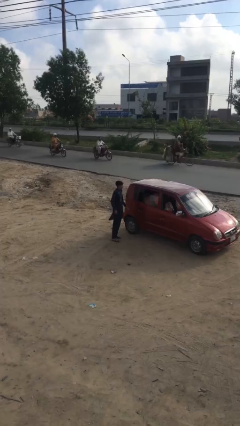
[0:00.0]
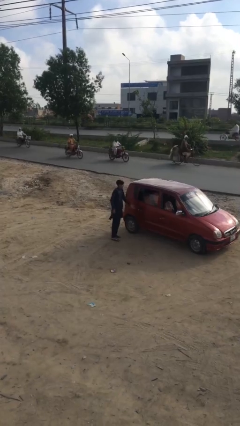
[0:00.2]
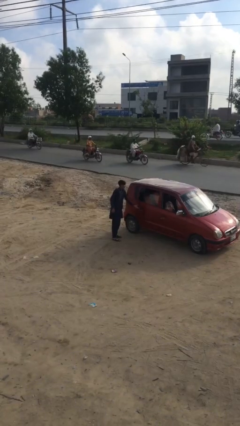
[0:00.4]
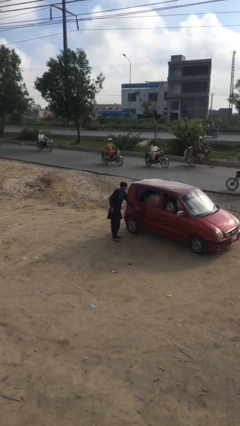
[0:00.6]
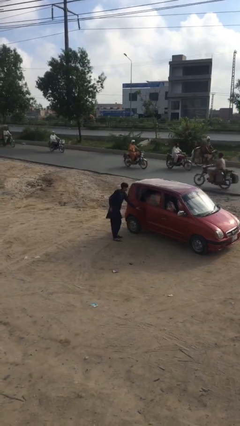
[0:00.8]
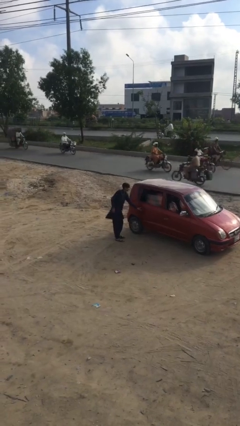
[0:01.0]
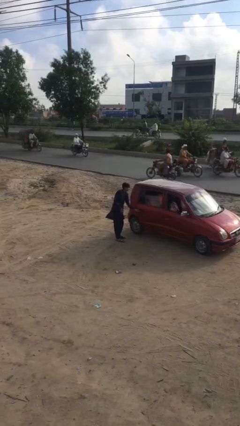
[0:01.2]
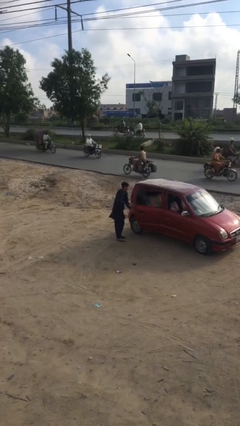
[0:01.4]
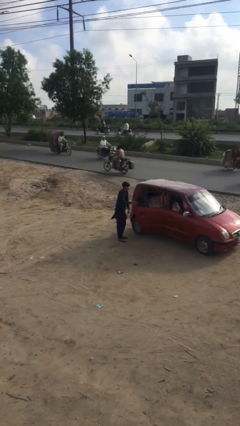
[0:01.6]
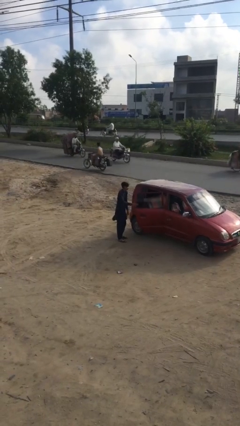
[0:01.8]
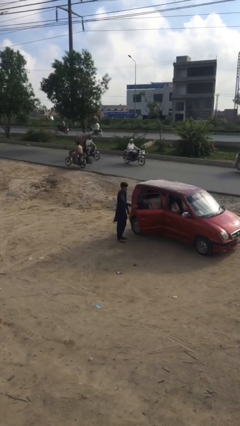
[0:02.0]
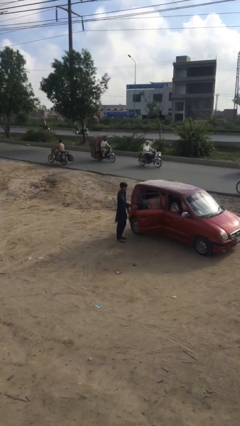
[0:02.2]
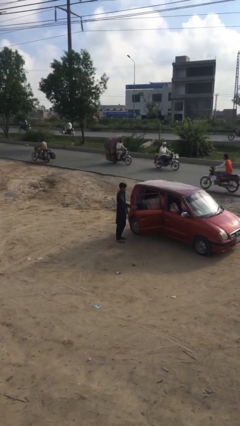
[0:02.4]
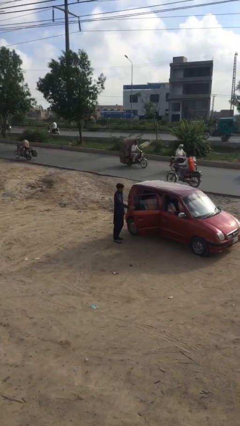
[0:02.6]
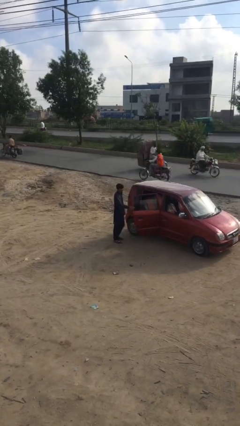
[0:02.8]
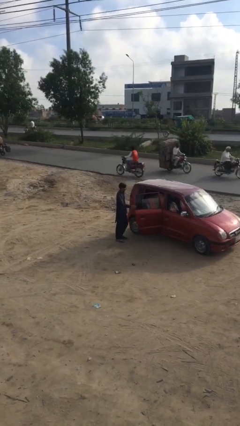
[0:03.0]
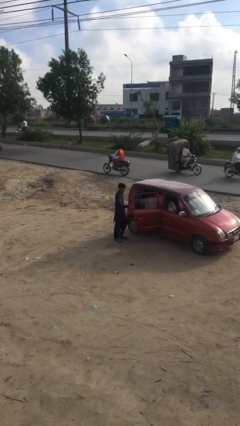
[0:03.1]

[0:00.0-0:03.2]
person opens car door

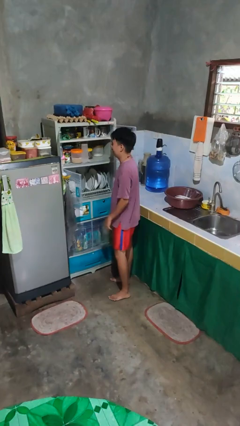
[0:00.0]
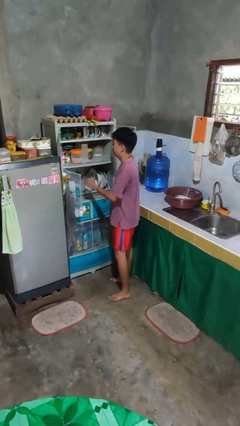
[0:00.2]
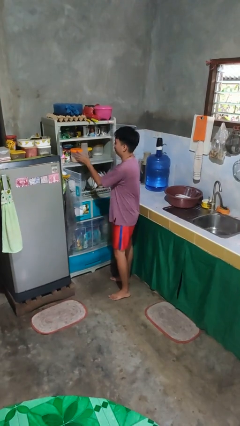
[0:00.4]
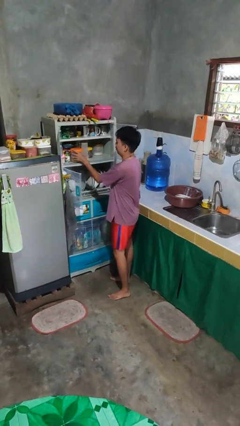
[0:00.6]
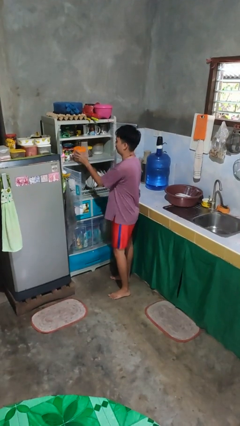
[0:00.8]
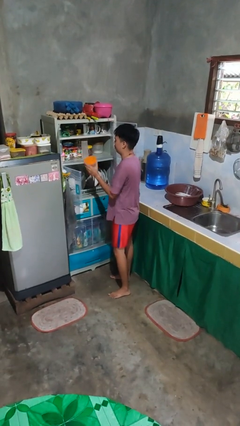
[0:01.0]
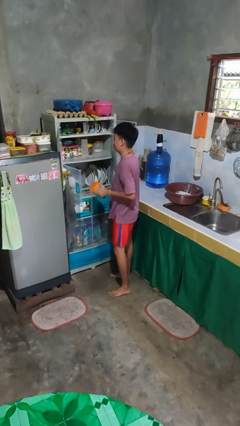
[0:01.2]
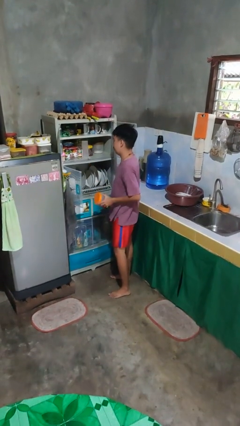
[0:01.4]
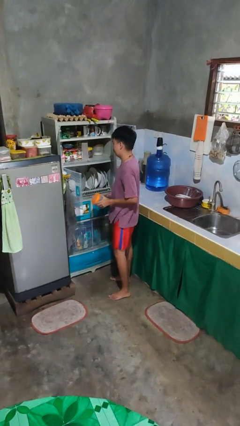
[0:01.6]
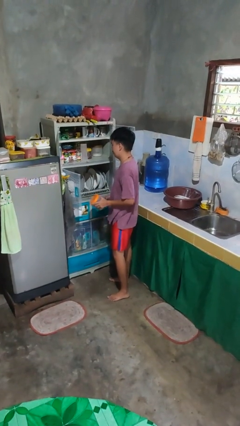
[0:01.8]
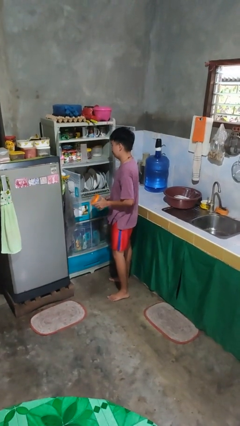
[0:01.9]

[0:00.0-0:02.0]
person takes object from cabinet

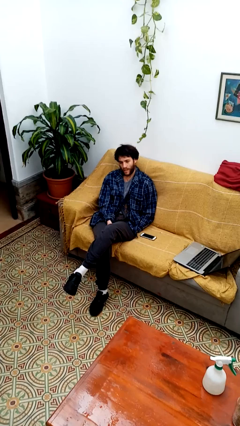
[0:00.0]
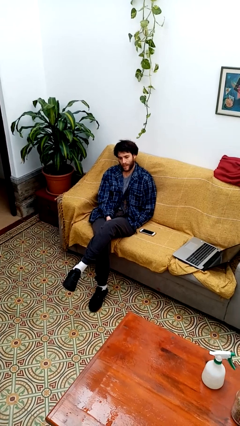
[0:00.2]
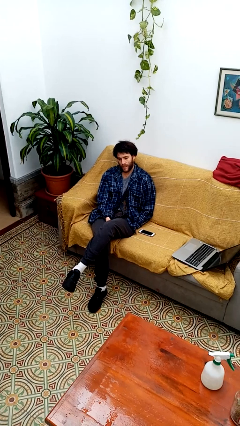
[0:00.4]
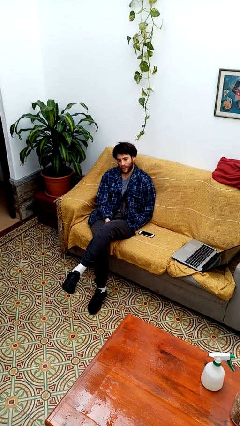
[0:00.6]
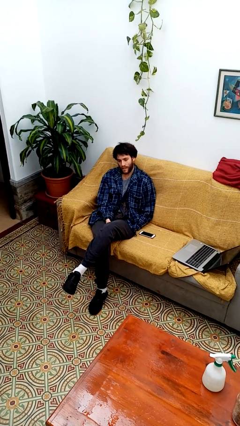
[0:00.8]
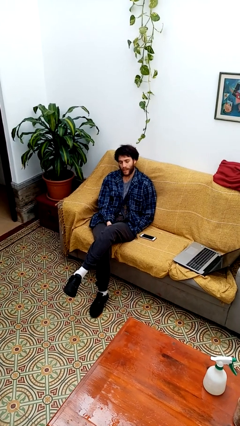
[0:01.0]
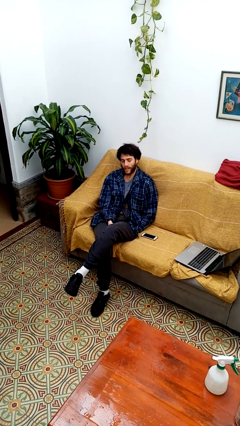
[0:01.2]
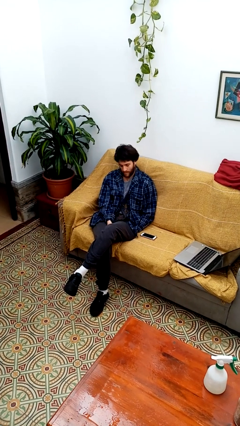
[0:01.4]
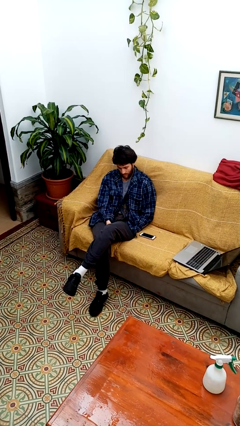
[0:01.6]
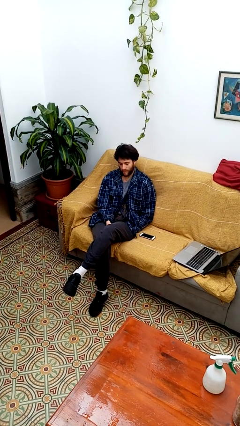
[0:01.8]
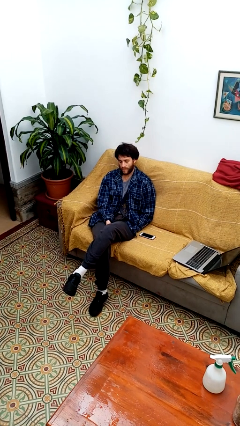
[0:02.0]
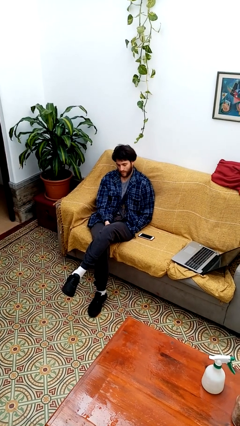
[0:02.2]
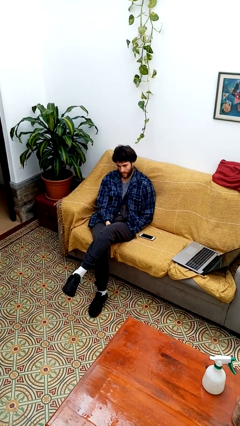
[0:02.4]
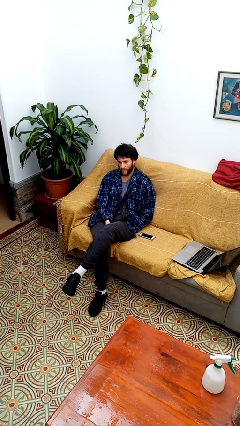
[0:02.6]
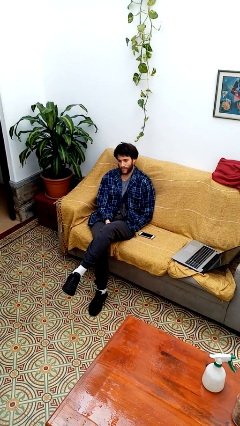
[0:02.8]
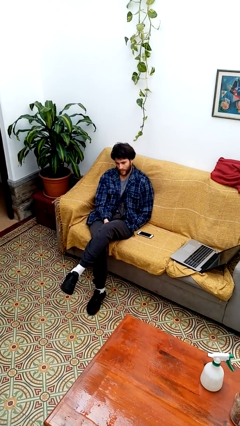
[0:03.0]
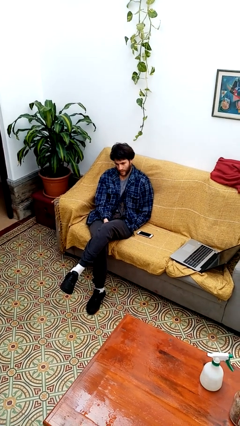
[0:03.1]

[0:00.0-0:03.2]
person nods head

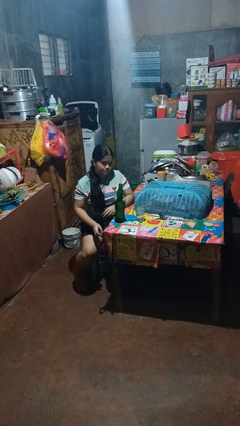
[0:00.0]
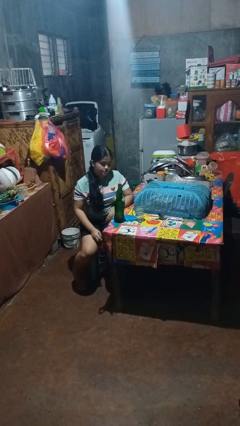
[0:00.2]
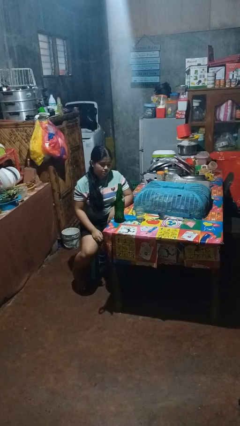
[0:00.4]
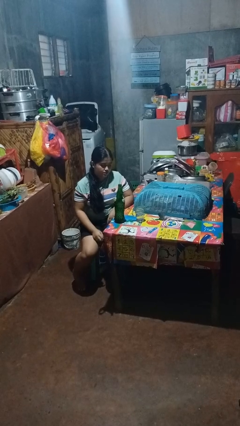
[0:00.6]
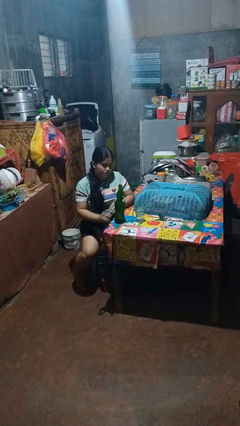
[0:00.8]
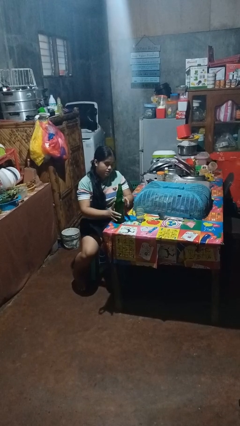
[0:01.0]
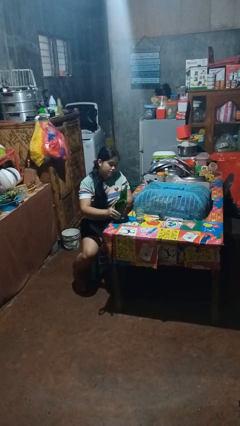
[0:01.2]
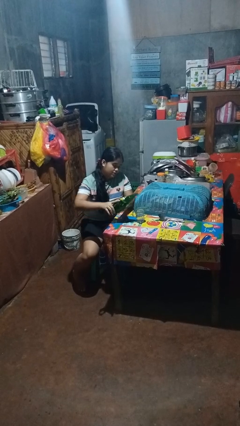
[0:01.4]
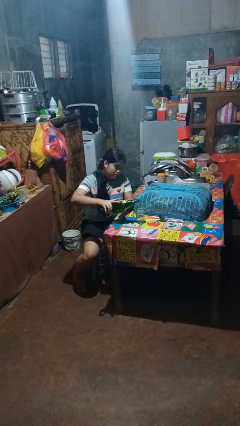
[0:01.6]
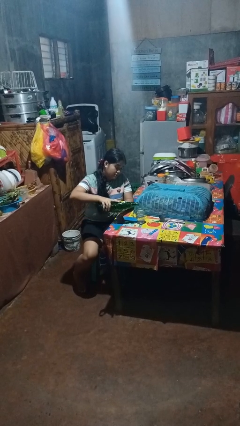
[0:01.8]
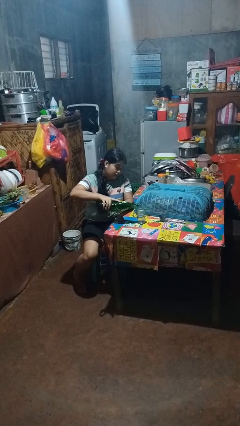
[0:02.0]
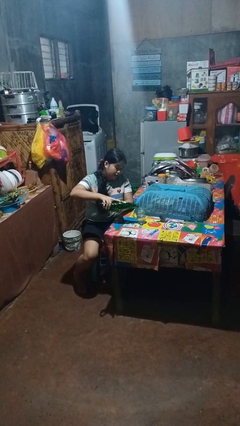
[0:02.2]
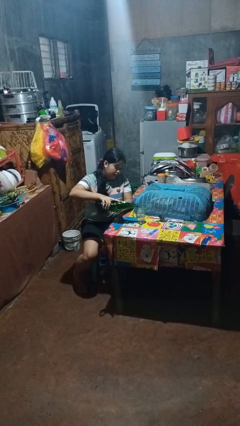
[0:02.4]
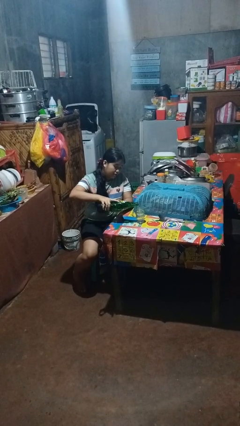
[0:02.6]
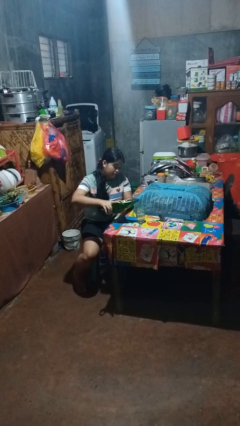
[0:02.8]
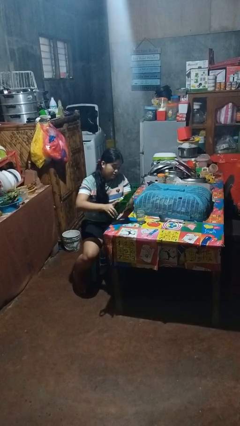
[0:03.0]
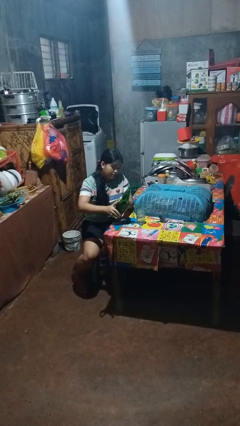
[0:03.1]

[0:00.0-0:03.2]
person pours liquid into cup

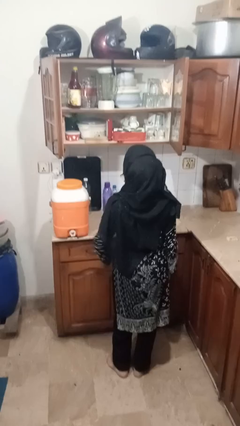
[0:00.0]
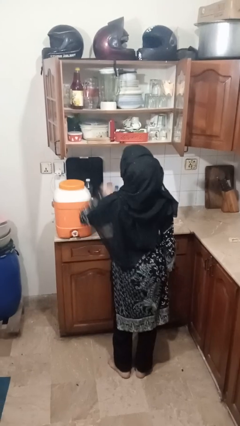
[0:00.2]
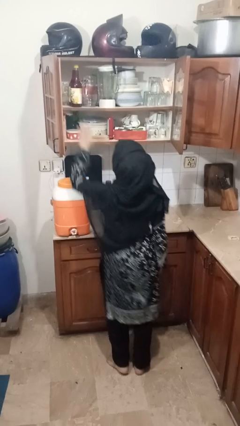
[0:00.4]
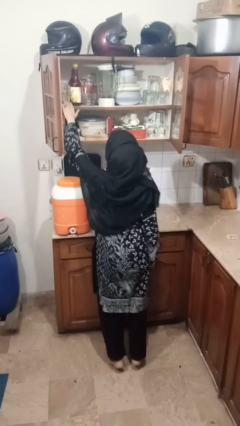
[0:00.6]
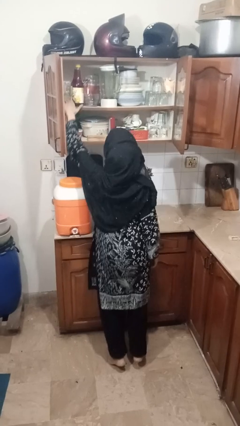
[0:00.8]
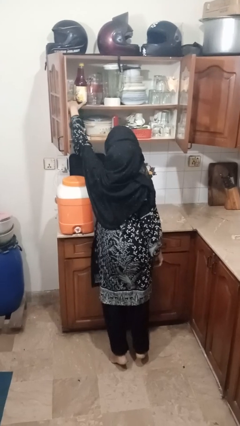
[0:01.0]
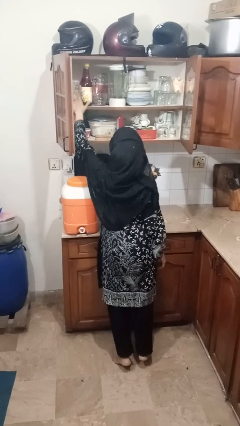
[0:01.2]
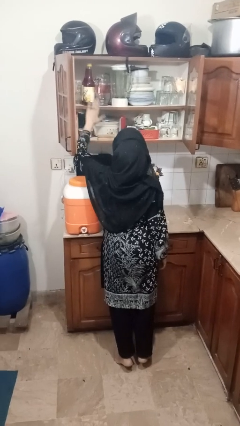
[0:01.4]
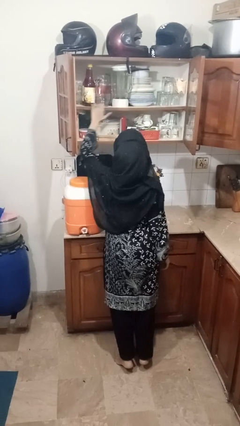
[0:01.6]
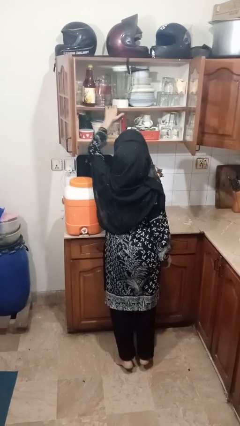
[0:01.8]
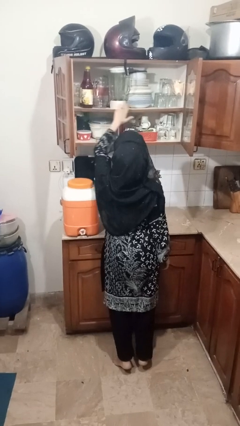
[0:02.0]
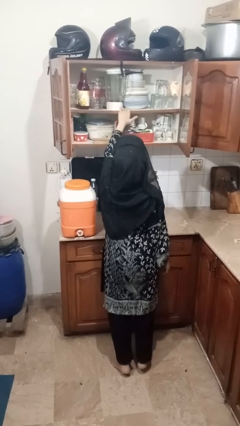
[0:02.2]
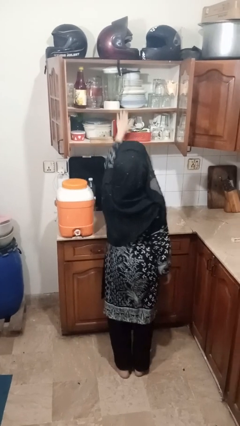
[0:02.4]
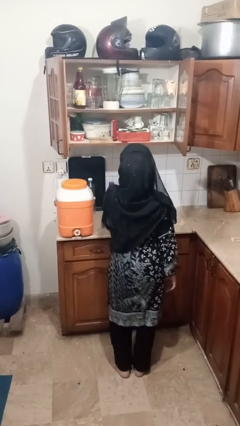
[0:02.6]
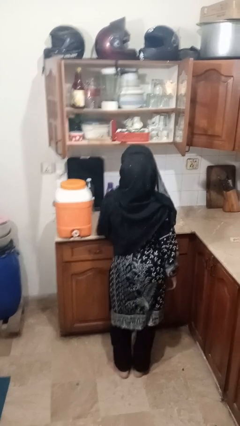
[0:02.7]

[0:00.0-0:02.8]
person searches in cabinet

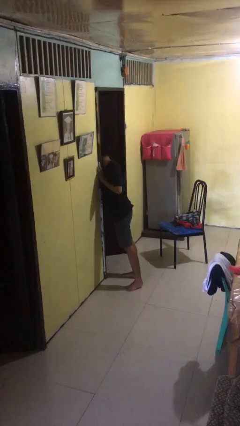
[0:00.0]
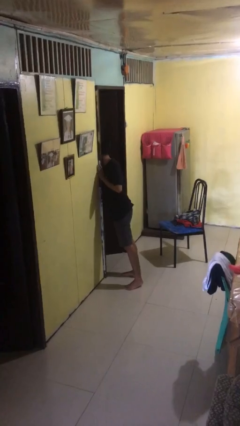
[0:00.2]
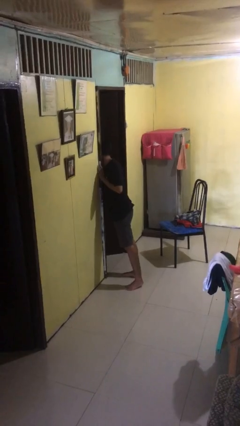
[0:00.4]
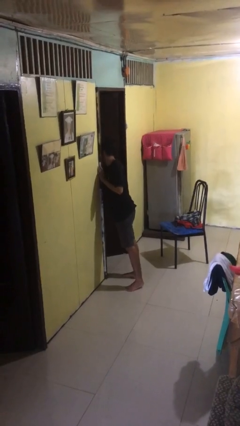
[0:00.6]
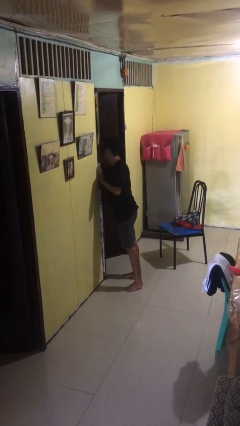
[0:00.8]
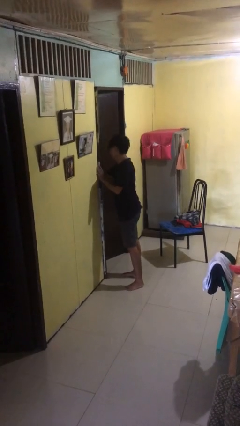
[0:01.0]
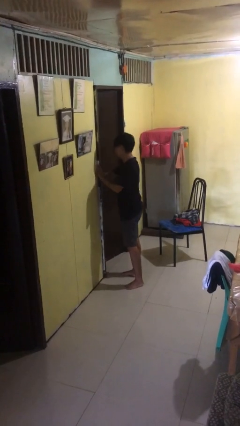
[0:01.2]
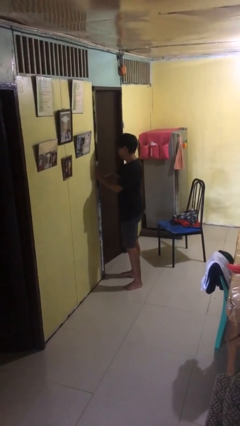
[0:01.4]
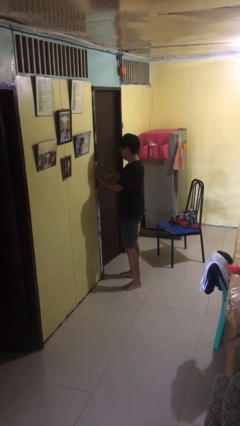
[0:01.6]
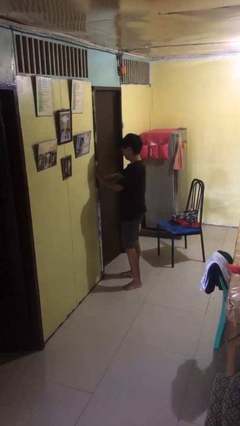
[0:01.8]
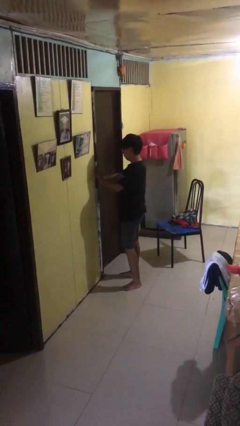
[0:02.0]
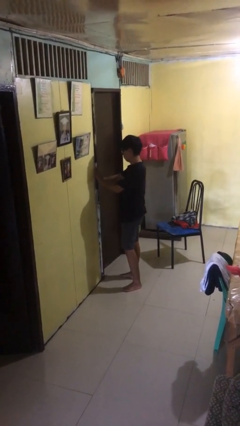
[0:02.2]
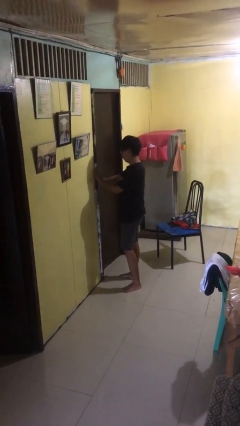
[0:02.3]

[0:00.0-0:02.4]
person closes facility door

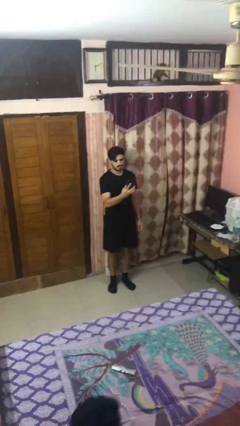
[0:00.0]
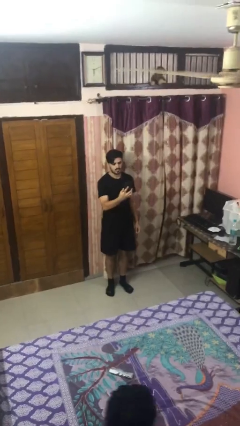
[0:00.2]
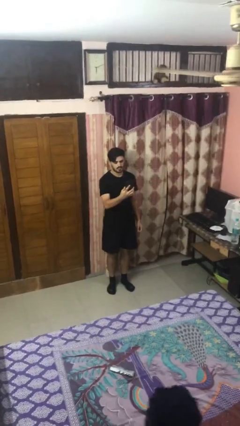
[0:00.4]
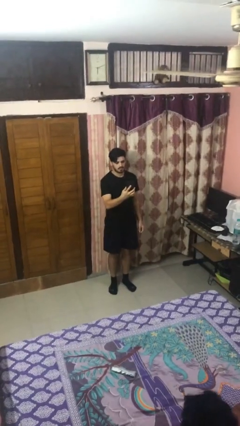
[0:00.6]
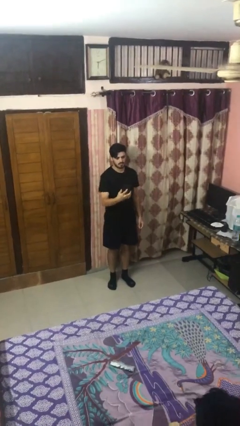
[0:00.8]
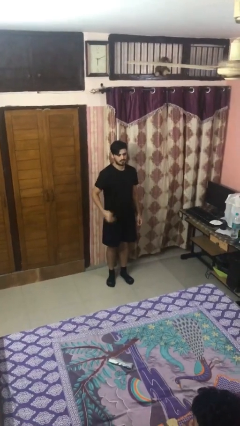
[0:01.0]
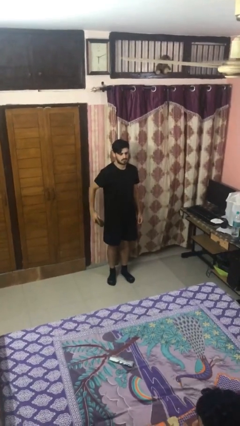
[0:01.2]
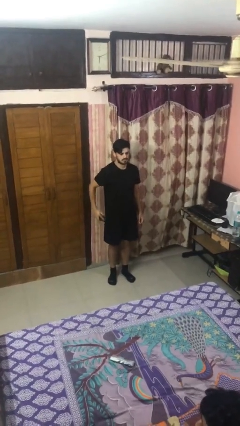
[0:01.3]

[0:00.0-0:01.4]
person puts phone into pocket
